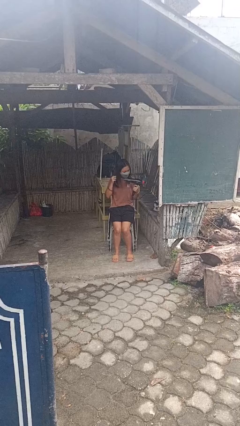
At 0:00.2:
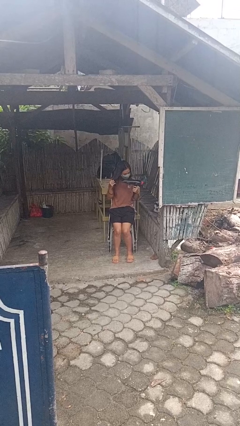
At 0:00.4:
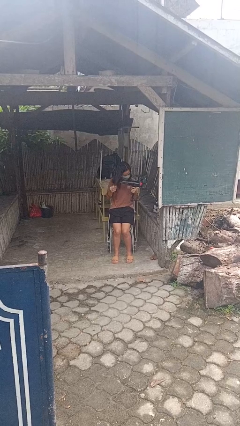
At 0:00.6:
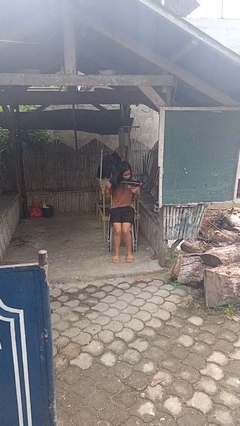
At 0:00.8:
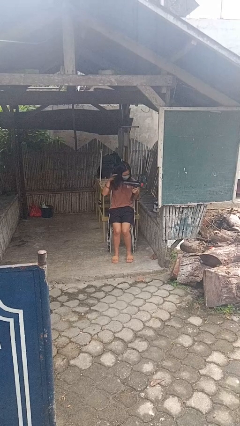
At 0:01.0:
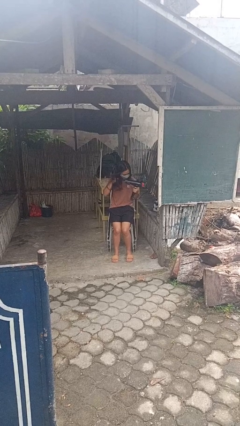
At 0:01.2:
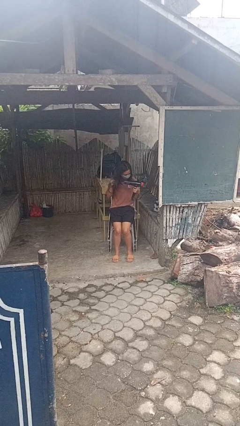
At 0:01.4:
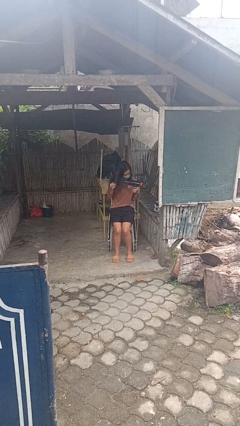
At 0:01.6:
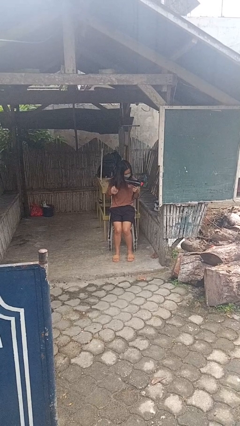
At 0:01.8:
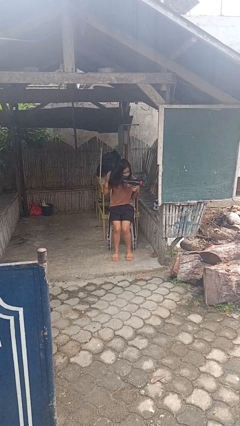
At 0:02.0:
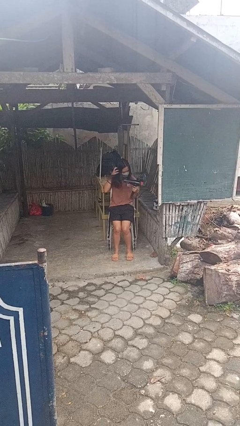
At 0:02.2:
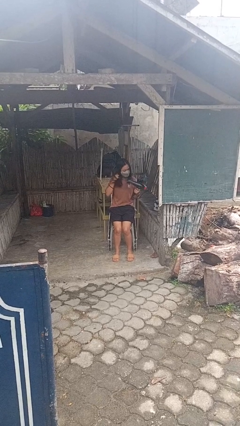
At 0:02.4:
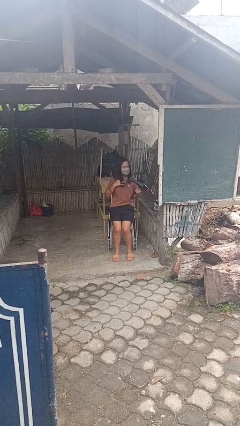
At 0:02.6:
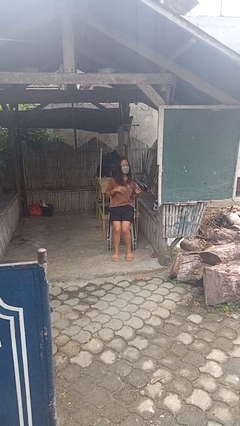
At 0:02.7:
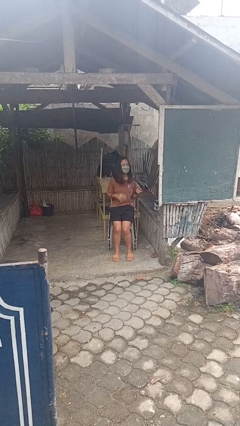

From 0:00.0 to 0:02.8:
person dries hair with hairdryer

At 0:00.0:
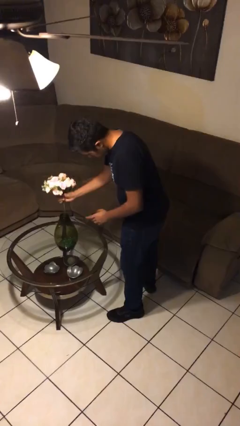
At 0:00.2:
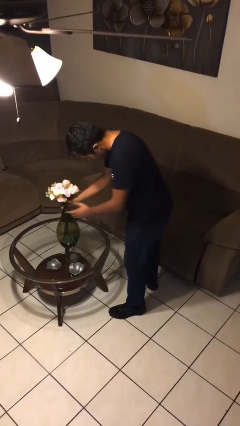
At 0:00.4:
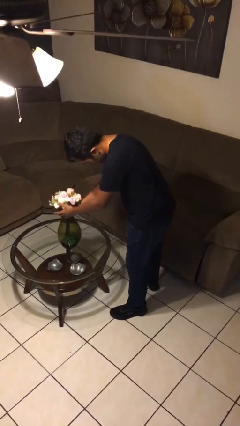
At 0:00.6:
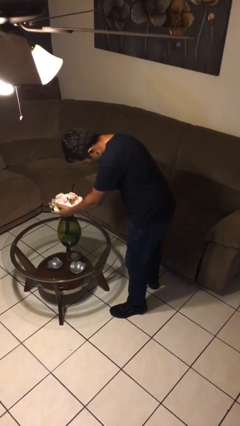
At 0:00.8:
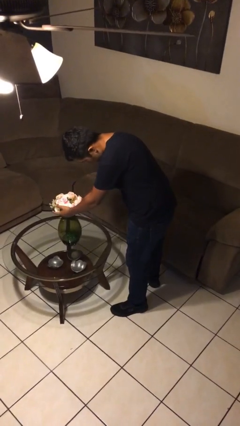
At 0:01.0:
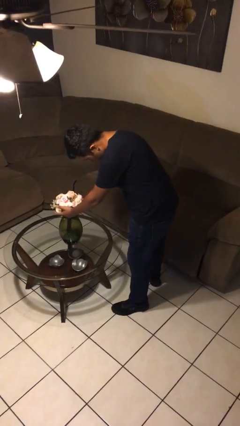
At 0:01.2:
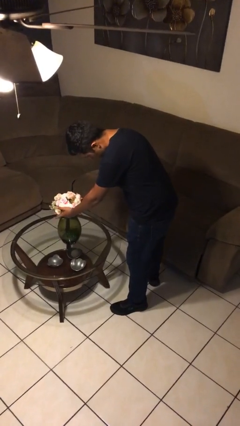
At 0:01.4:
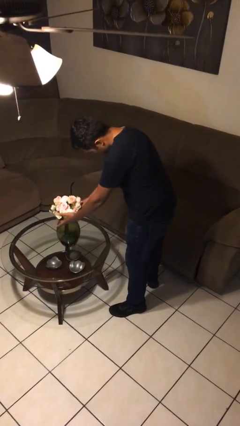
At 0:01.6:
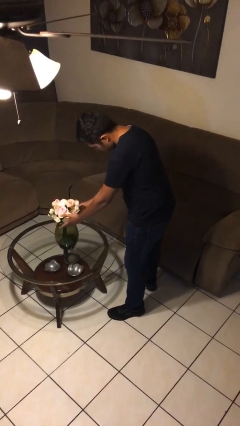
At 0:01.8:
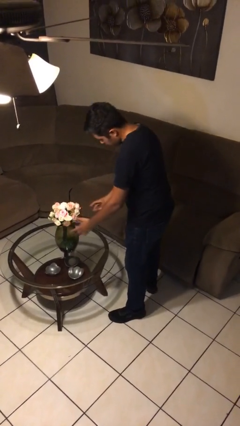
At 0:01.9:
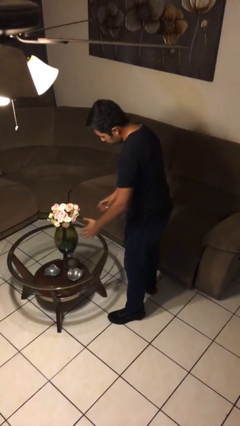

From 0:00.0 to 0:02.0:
person arranges flowers in vase

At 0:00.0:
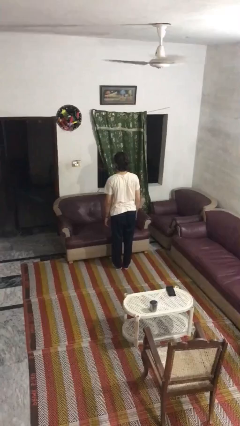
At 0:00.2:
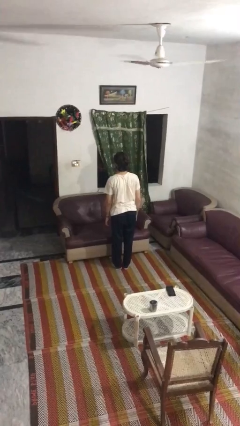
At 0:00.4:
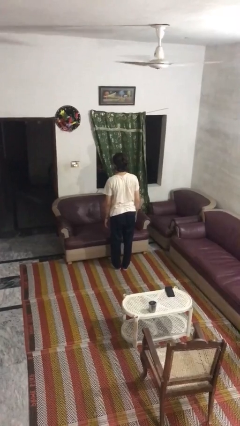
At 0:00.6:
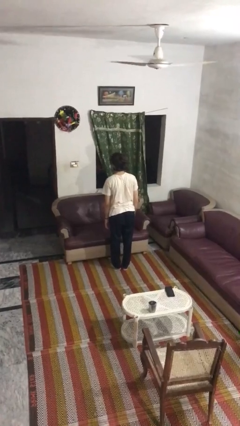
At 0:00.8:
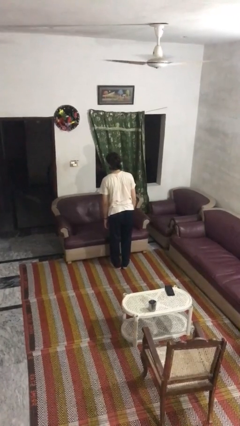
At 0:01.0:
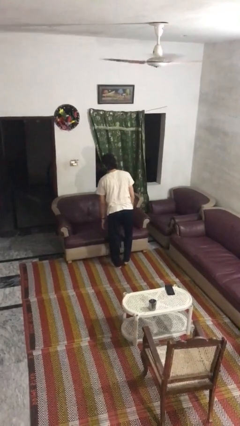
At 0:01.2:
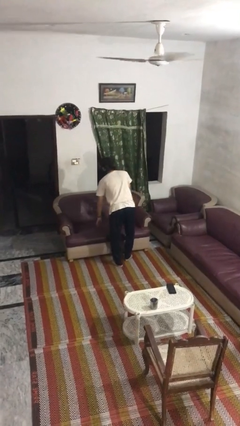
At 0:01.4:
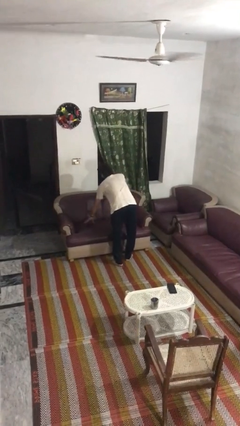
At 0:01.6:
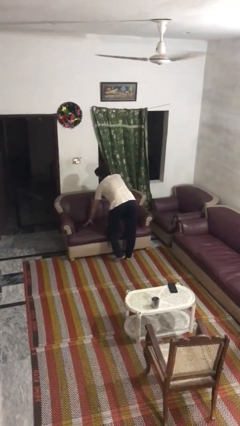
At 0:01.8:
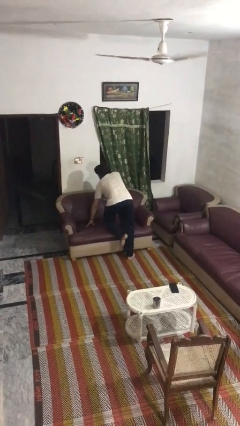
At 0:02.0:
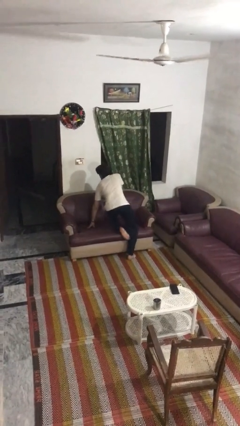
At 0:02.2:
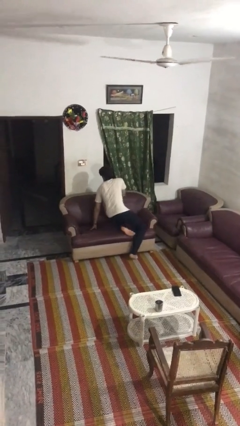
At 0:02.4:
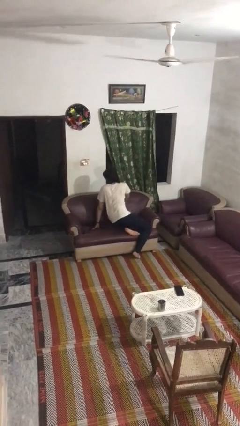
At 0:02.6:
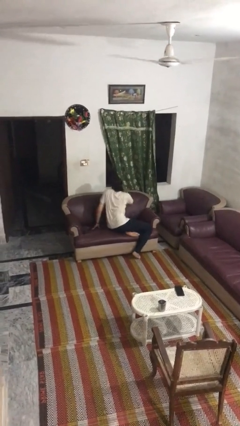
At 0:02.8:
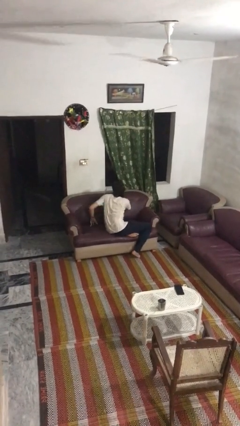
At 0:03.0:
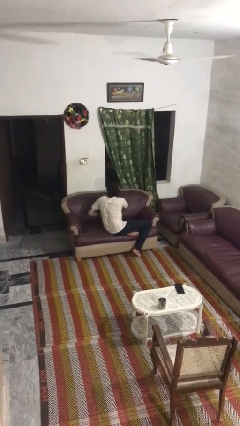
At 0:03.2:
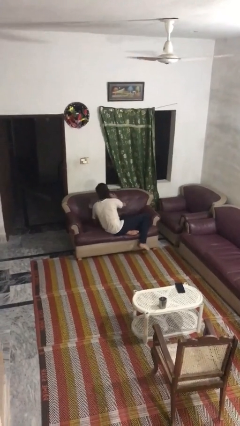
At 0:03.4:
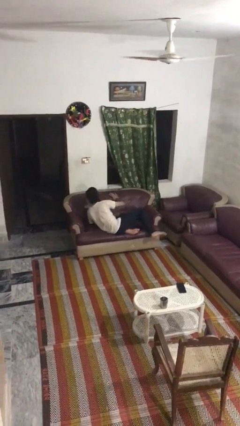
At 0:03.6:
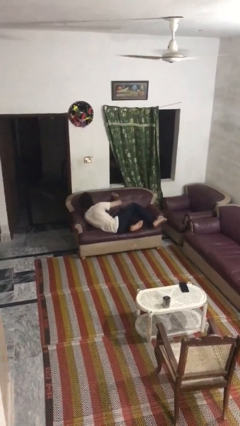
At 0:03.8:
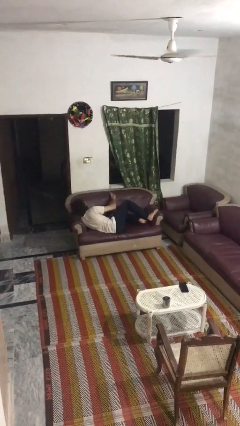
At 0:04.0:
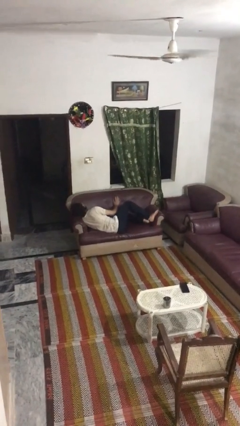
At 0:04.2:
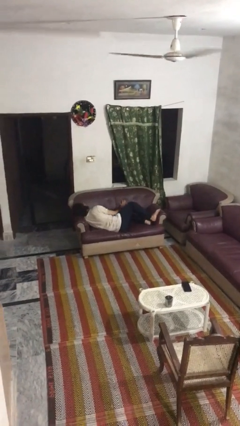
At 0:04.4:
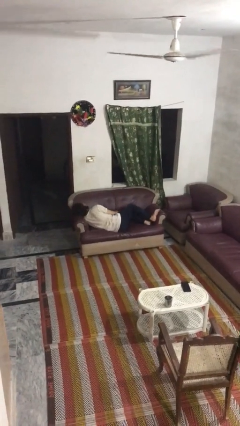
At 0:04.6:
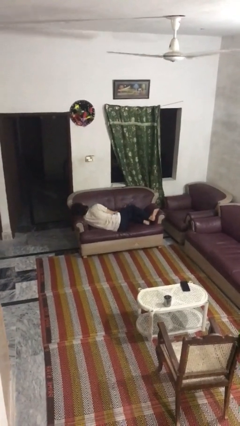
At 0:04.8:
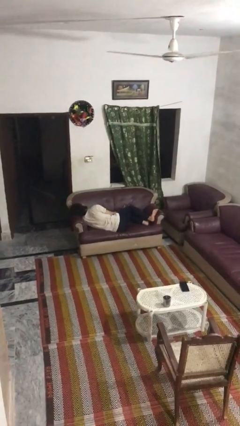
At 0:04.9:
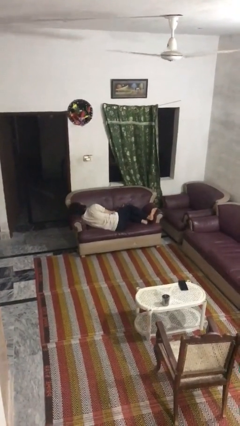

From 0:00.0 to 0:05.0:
person lies down on couch

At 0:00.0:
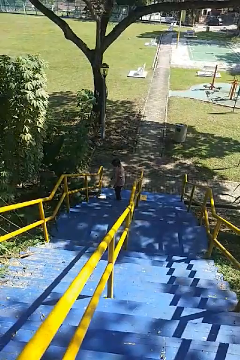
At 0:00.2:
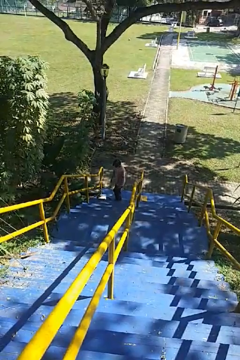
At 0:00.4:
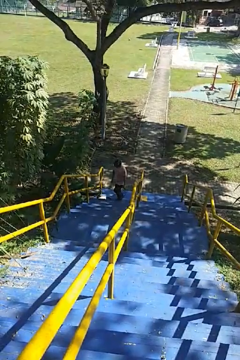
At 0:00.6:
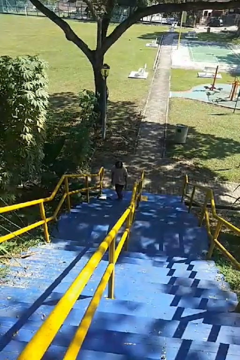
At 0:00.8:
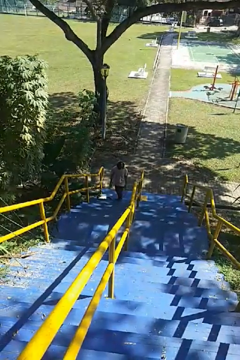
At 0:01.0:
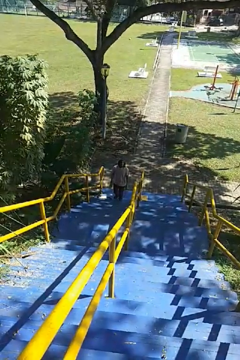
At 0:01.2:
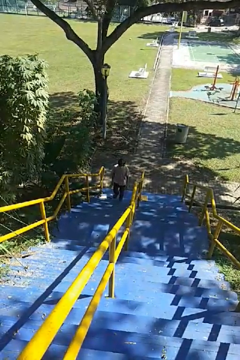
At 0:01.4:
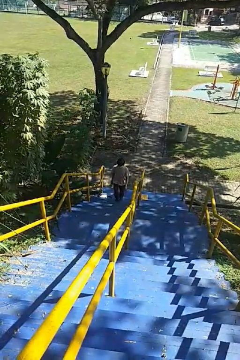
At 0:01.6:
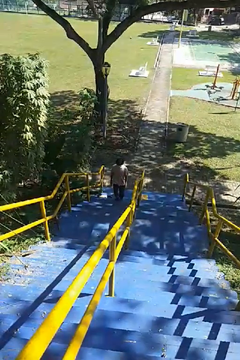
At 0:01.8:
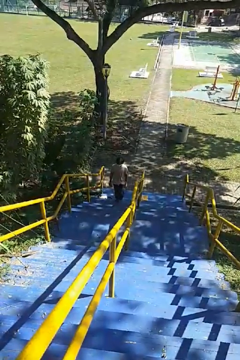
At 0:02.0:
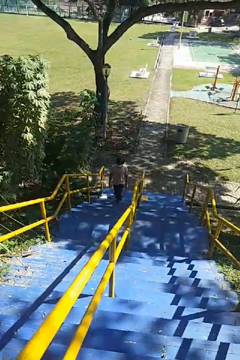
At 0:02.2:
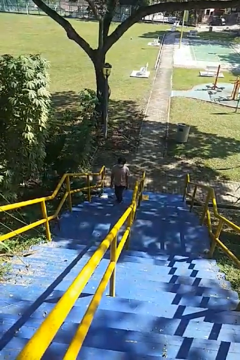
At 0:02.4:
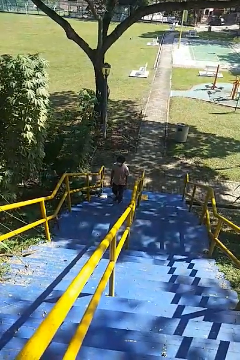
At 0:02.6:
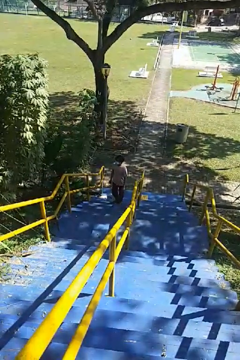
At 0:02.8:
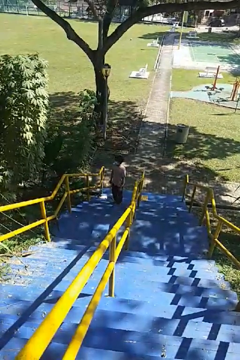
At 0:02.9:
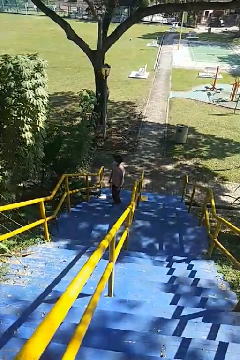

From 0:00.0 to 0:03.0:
person climbs up stairs

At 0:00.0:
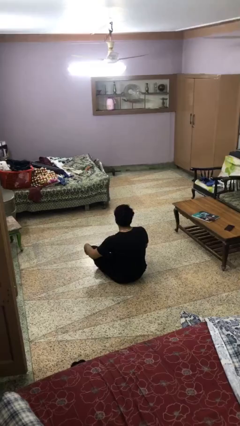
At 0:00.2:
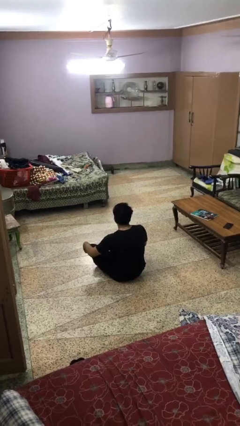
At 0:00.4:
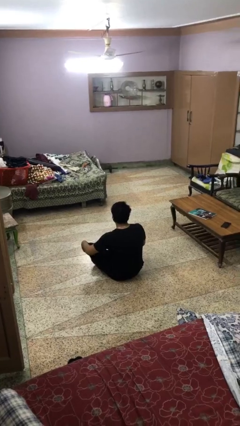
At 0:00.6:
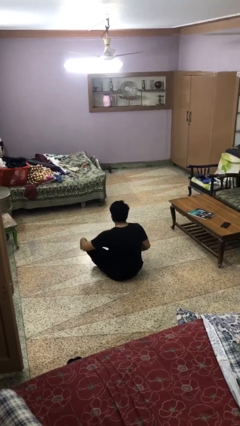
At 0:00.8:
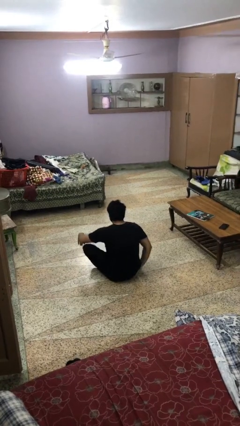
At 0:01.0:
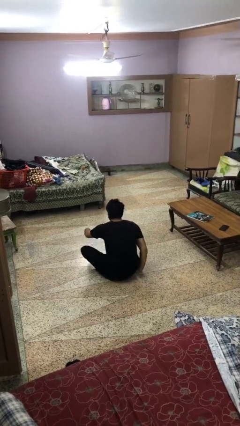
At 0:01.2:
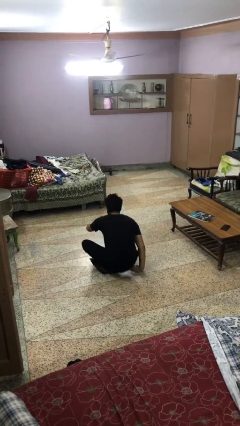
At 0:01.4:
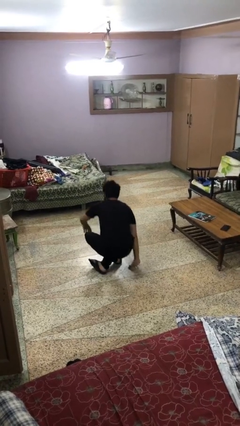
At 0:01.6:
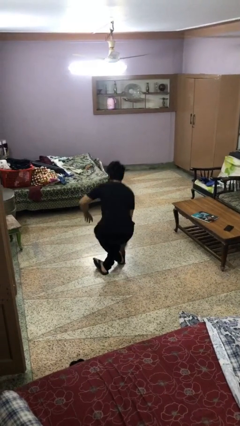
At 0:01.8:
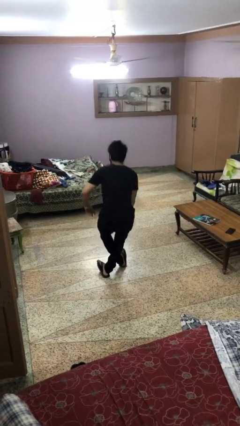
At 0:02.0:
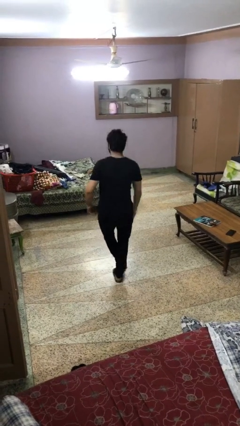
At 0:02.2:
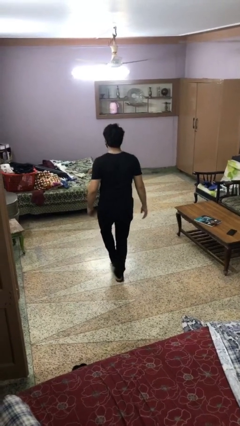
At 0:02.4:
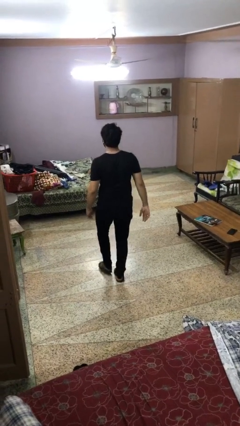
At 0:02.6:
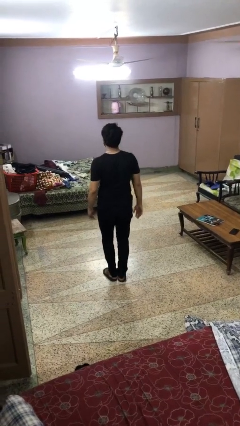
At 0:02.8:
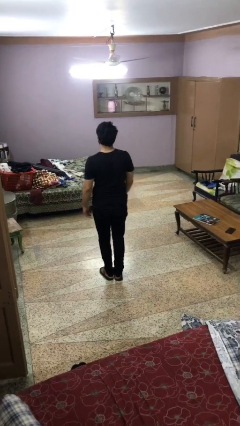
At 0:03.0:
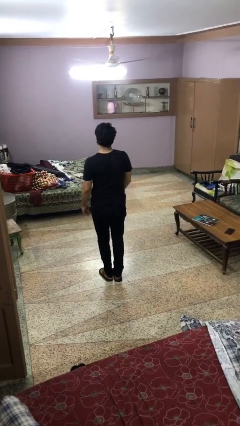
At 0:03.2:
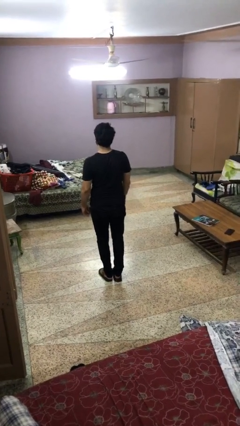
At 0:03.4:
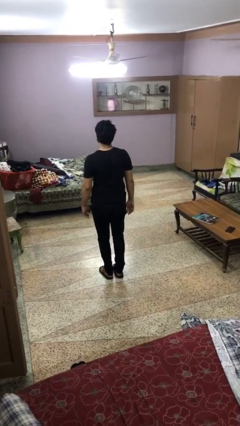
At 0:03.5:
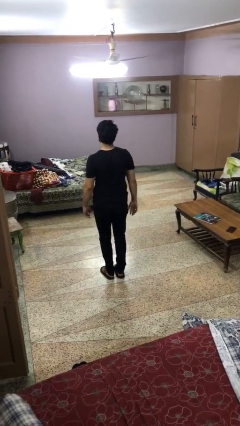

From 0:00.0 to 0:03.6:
person stands up from floor

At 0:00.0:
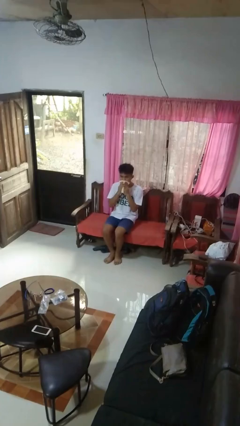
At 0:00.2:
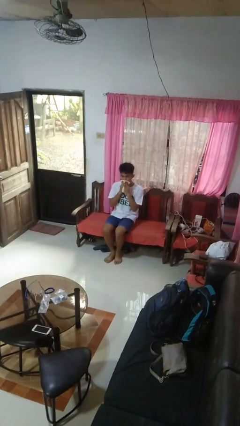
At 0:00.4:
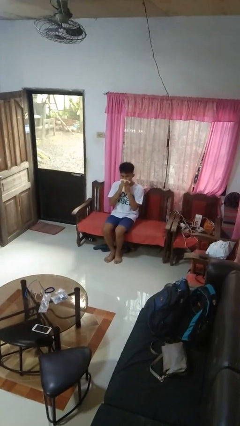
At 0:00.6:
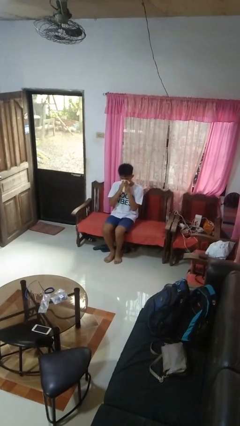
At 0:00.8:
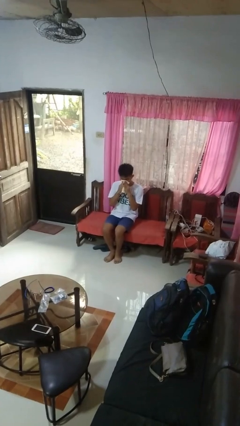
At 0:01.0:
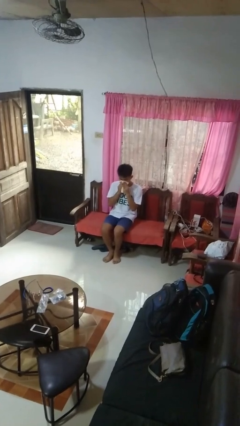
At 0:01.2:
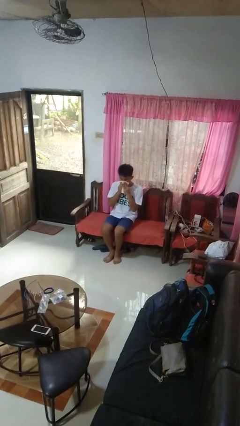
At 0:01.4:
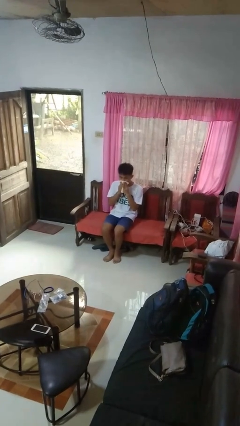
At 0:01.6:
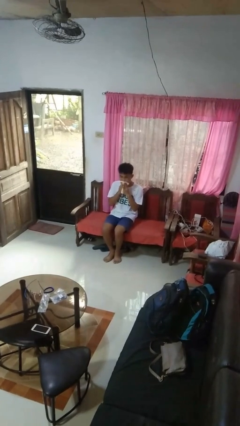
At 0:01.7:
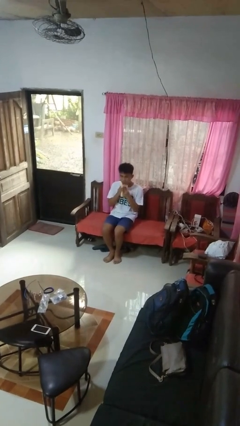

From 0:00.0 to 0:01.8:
person wipes mouth with napkin
